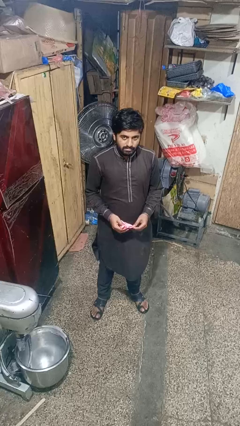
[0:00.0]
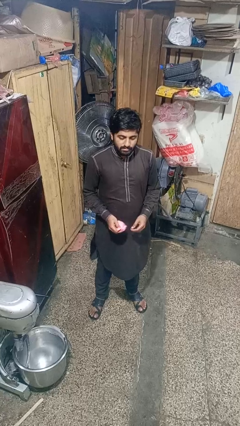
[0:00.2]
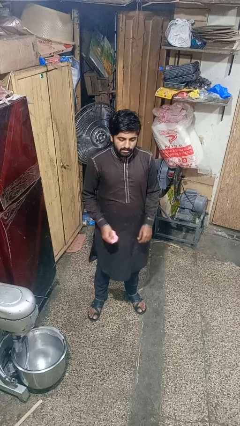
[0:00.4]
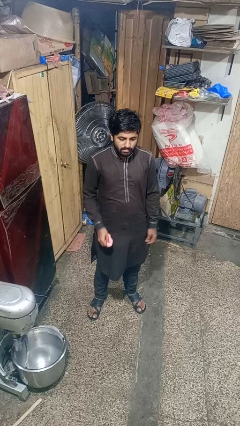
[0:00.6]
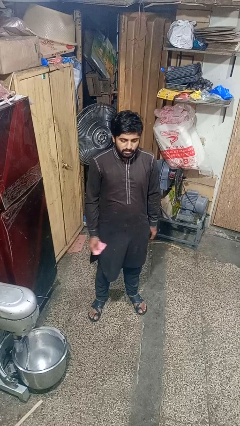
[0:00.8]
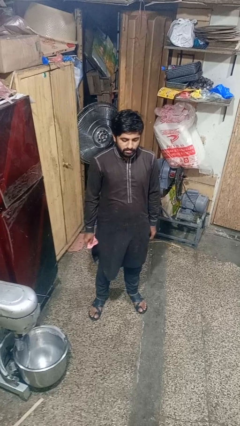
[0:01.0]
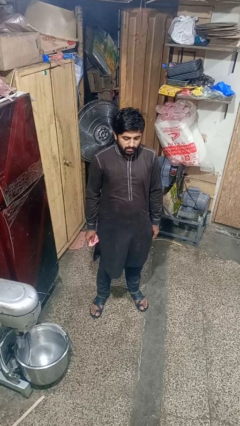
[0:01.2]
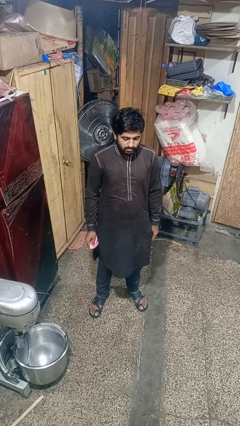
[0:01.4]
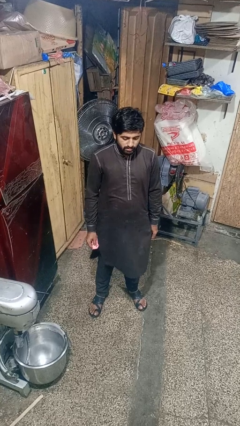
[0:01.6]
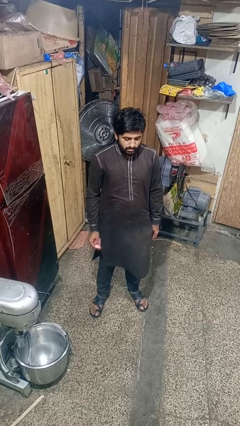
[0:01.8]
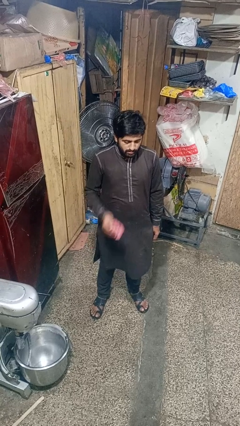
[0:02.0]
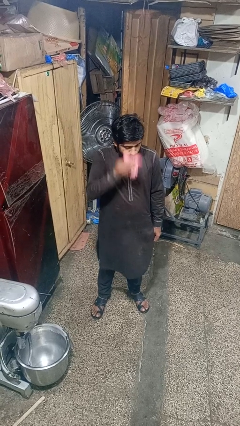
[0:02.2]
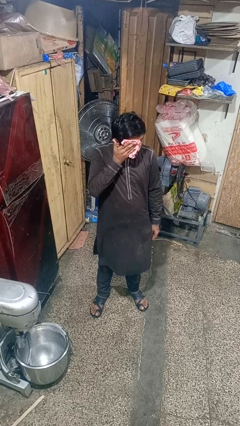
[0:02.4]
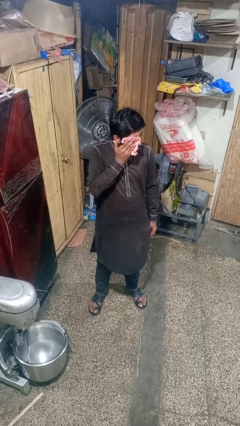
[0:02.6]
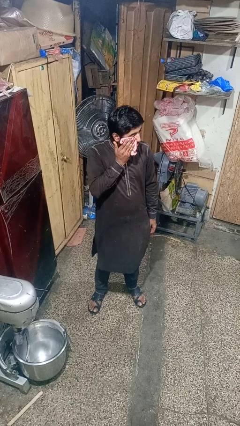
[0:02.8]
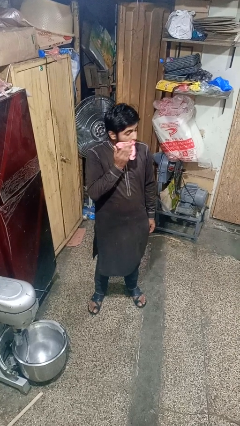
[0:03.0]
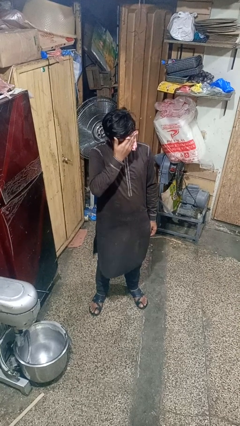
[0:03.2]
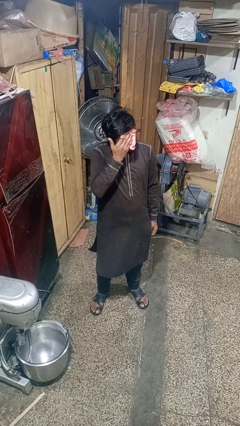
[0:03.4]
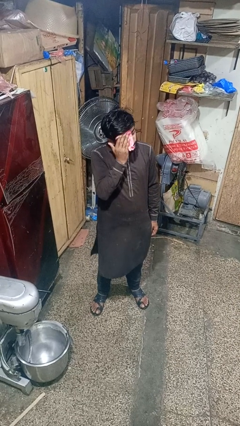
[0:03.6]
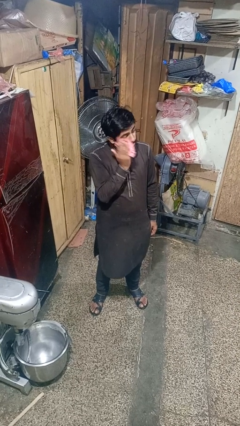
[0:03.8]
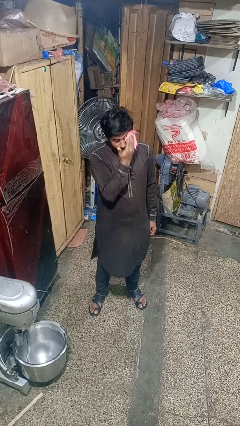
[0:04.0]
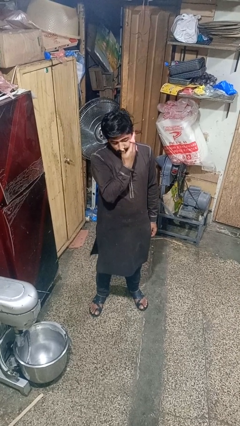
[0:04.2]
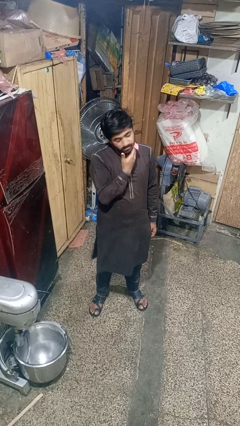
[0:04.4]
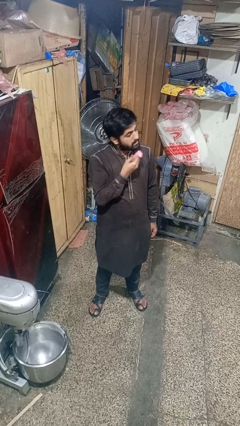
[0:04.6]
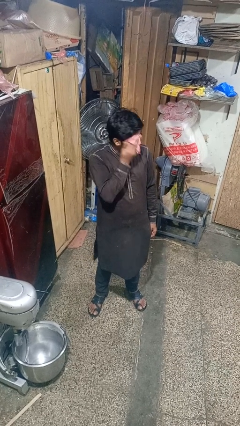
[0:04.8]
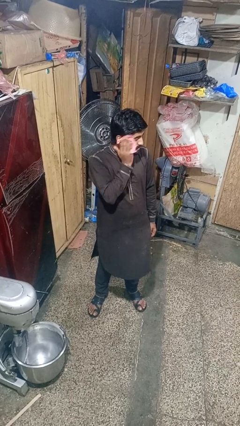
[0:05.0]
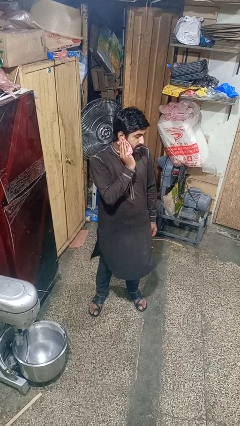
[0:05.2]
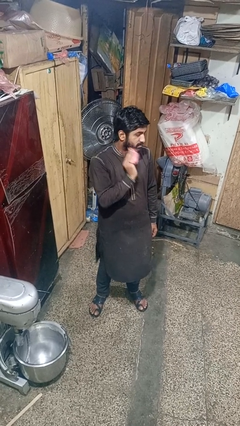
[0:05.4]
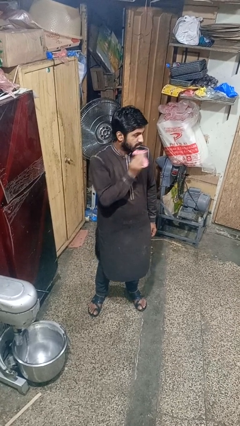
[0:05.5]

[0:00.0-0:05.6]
person wipes mouth with napkin

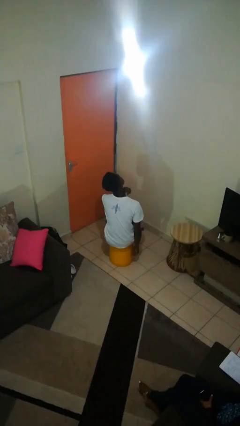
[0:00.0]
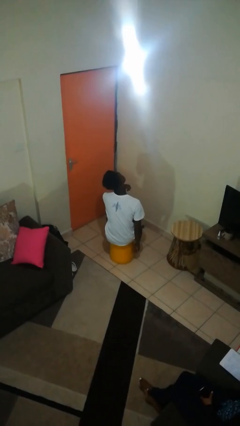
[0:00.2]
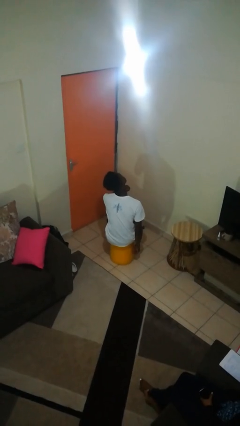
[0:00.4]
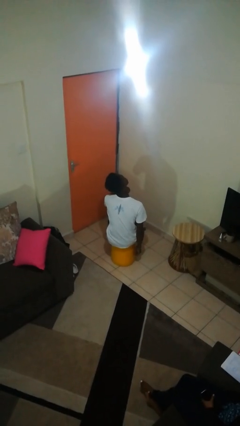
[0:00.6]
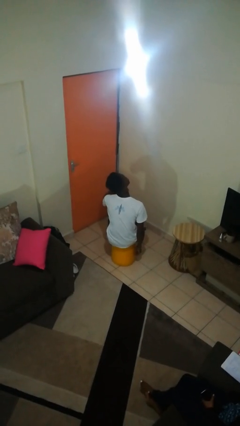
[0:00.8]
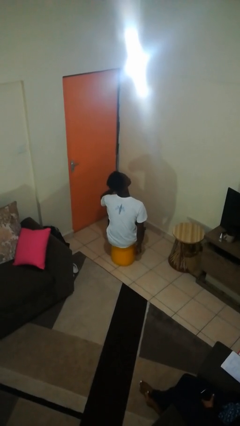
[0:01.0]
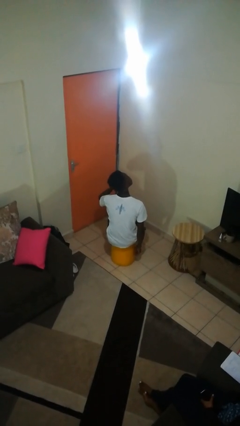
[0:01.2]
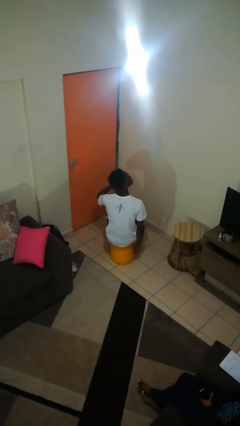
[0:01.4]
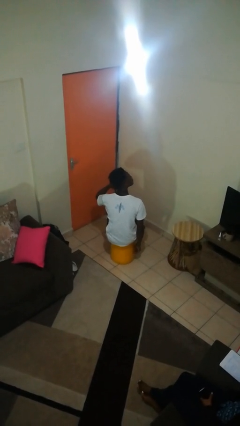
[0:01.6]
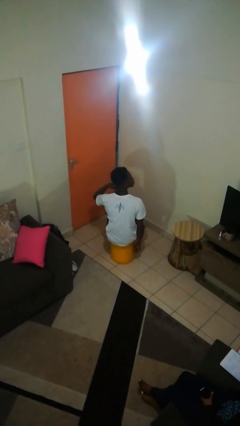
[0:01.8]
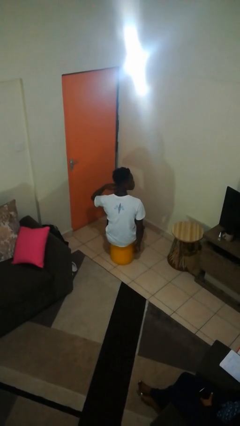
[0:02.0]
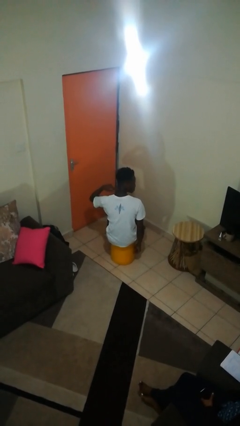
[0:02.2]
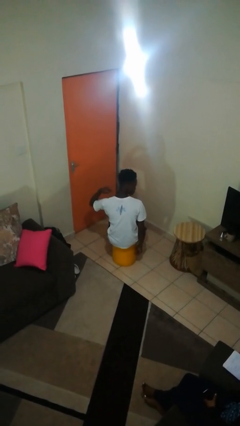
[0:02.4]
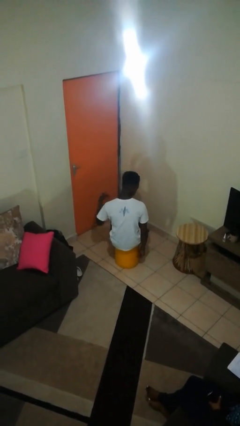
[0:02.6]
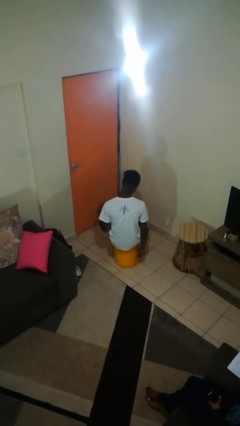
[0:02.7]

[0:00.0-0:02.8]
person gestures cut

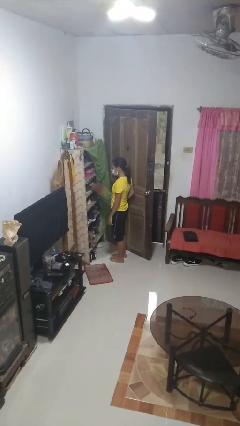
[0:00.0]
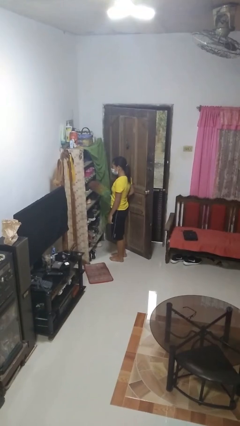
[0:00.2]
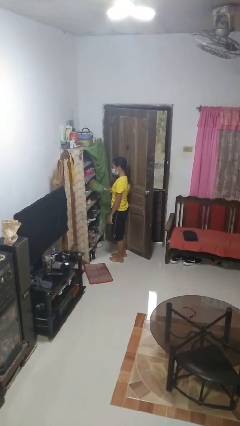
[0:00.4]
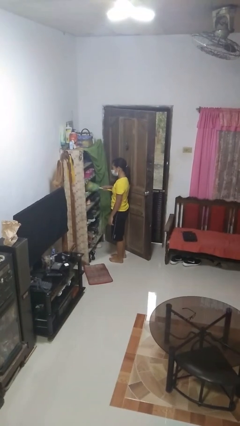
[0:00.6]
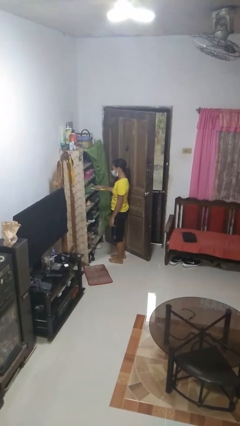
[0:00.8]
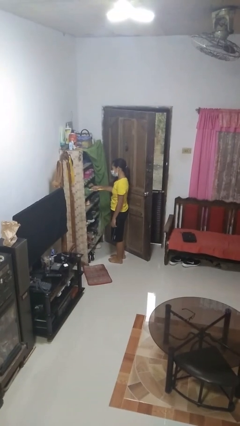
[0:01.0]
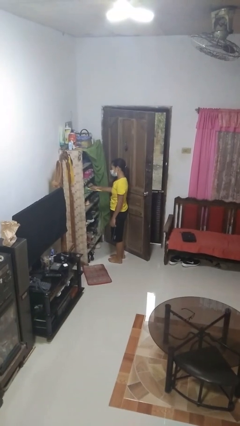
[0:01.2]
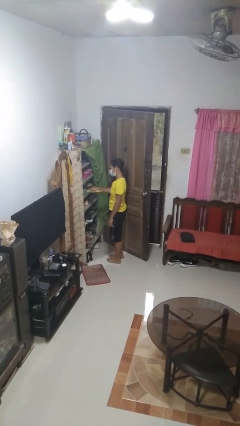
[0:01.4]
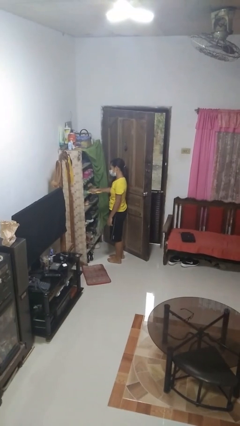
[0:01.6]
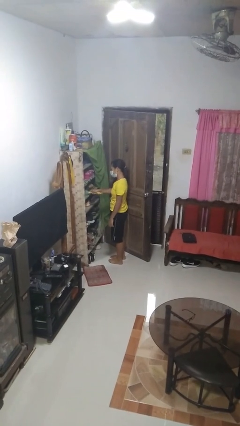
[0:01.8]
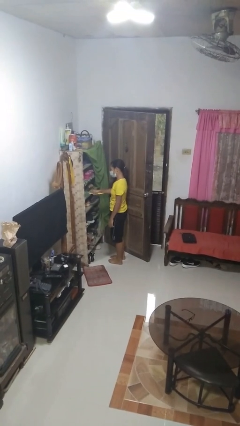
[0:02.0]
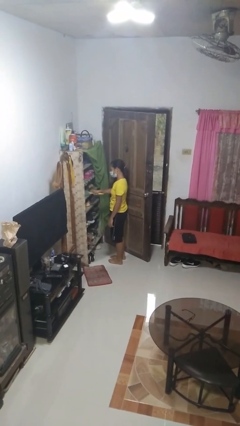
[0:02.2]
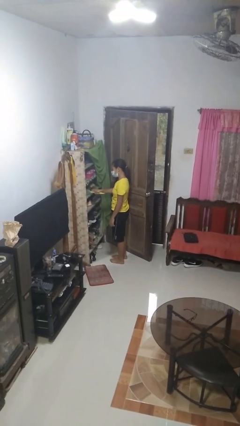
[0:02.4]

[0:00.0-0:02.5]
person dusts furniture

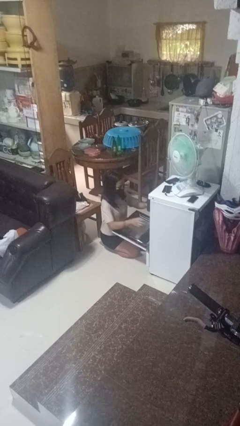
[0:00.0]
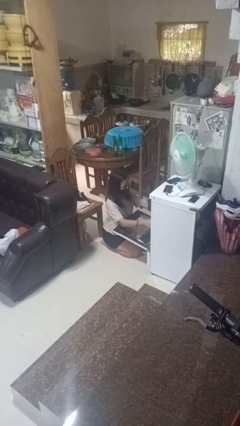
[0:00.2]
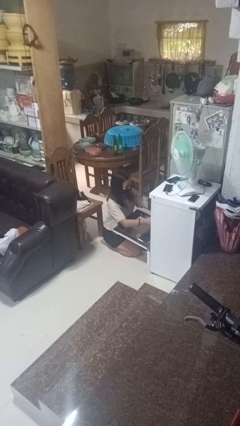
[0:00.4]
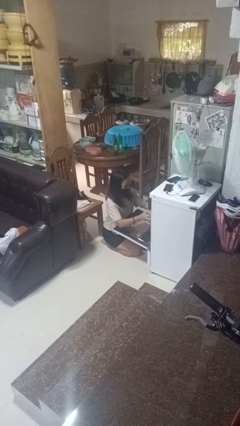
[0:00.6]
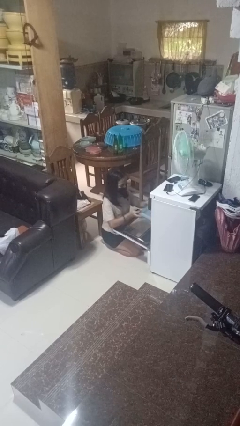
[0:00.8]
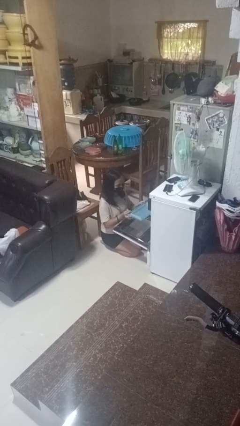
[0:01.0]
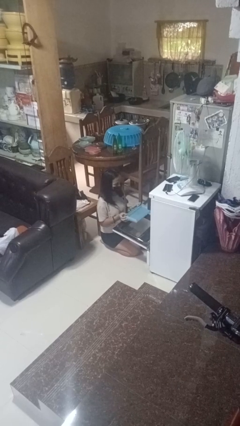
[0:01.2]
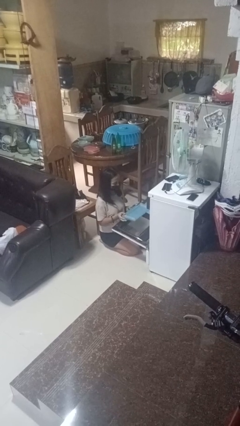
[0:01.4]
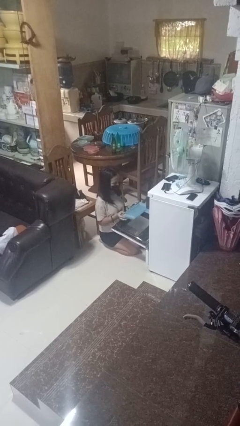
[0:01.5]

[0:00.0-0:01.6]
person takes object from oven

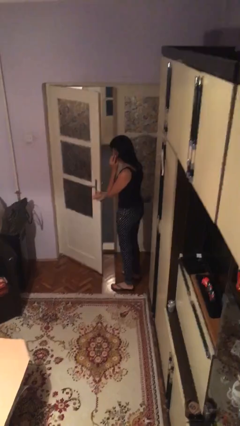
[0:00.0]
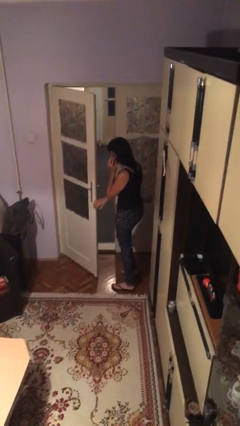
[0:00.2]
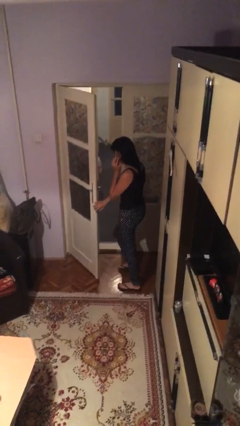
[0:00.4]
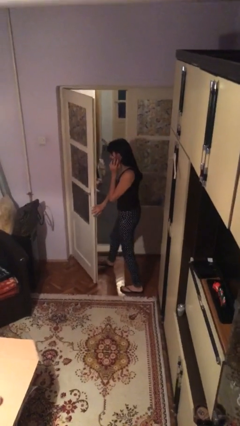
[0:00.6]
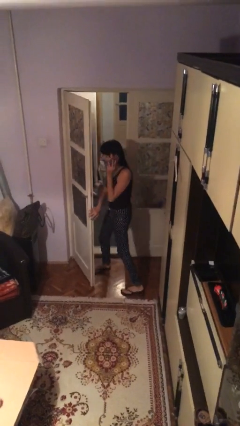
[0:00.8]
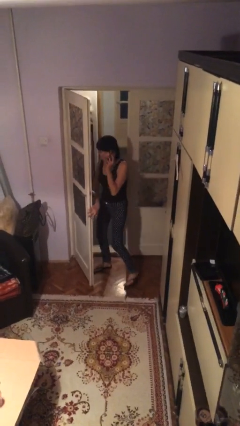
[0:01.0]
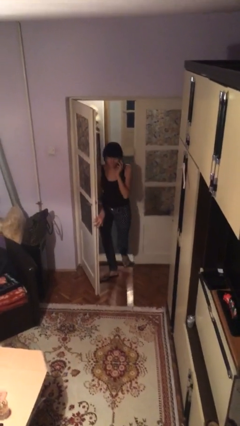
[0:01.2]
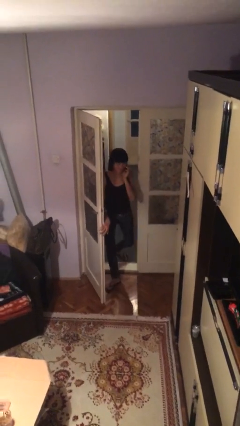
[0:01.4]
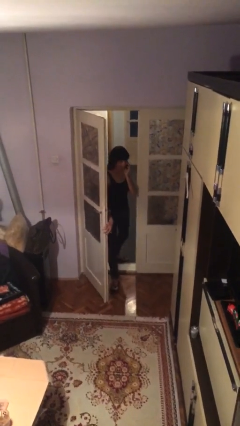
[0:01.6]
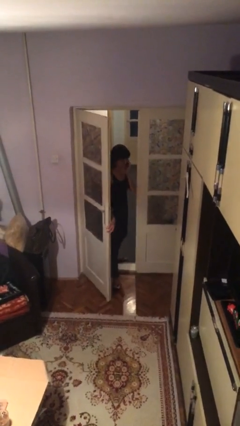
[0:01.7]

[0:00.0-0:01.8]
person exits scene through structure

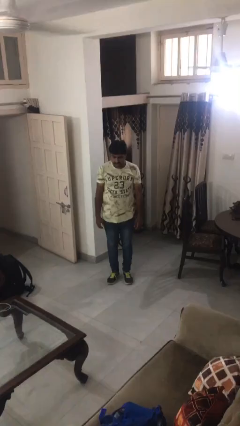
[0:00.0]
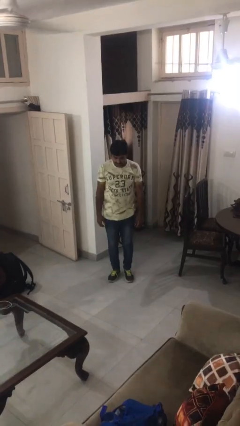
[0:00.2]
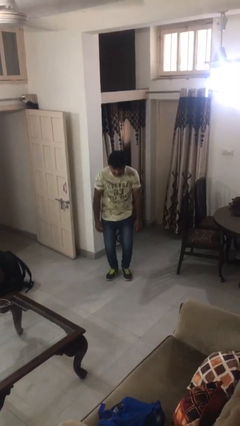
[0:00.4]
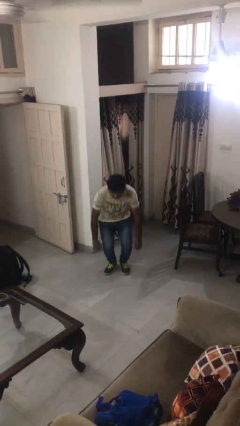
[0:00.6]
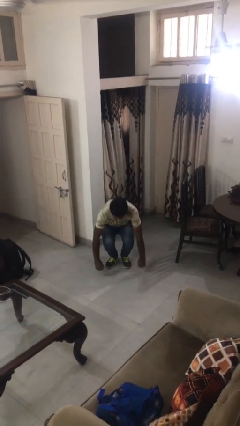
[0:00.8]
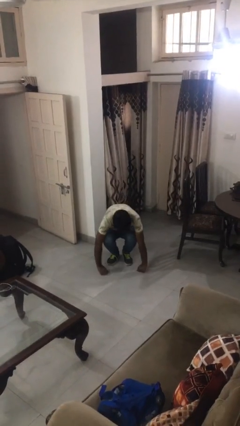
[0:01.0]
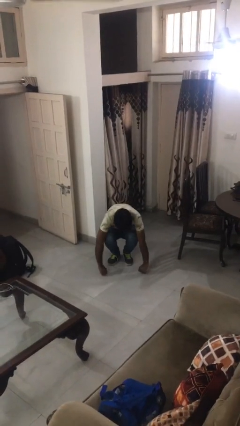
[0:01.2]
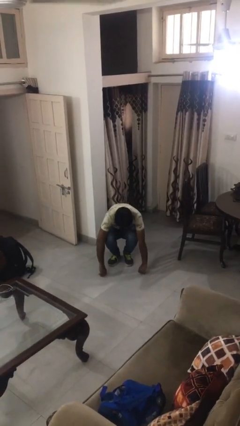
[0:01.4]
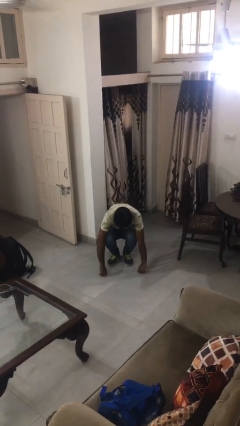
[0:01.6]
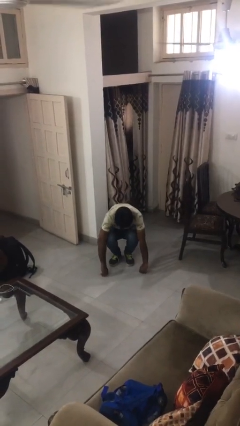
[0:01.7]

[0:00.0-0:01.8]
person squats

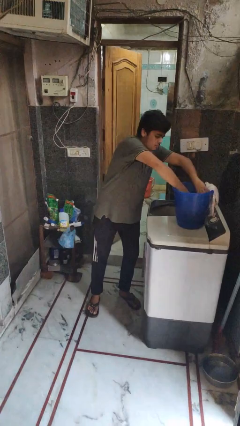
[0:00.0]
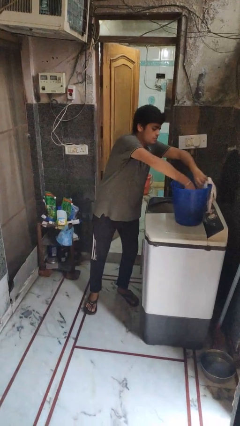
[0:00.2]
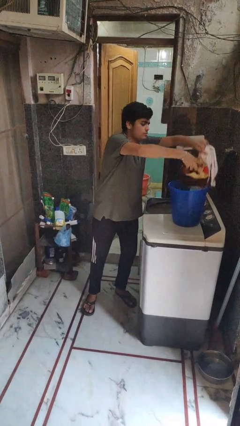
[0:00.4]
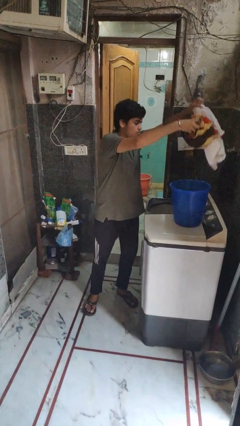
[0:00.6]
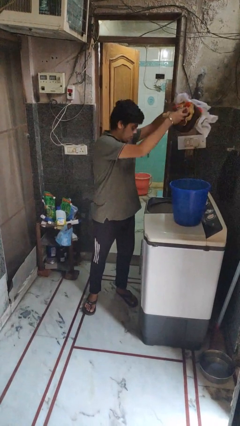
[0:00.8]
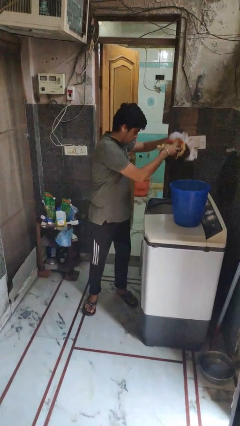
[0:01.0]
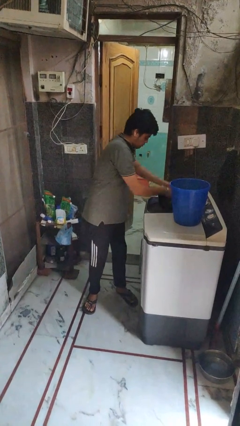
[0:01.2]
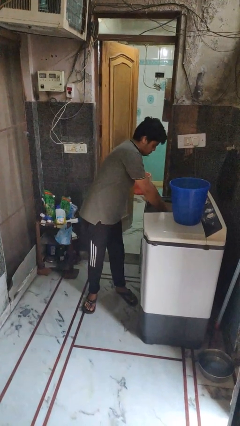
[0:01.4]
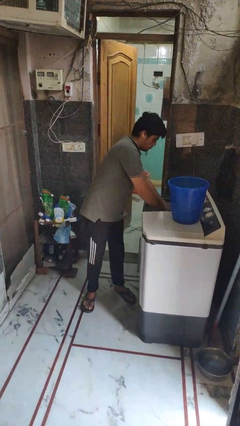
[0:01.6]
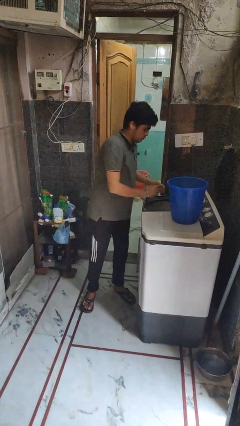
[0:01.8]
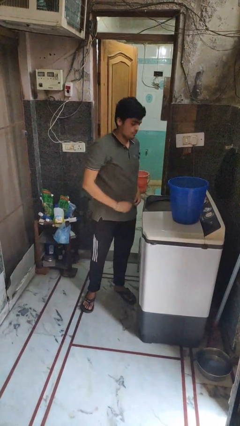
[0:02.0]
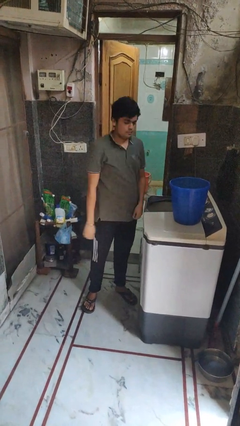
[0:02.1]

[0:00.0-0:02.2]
person loads clotheswasher
